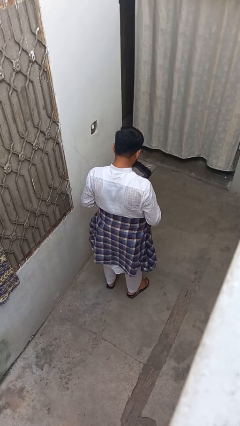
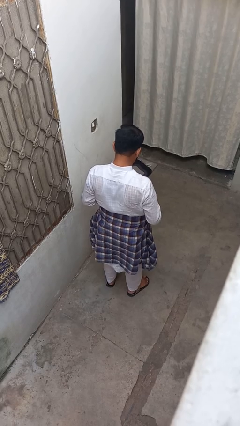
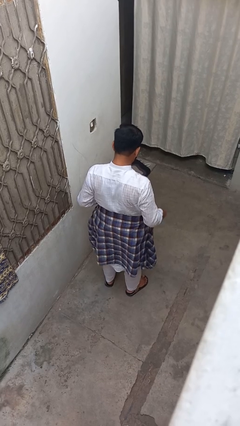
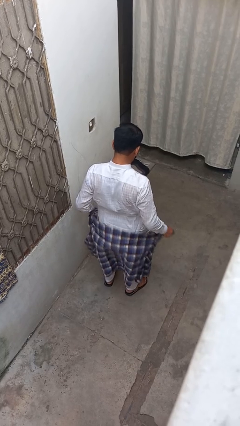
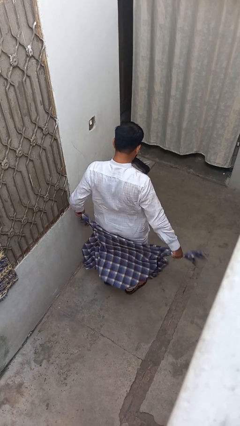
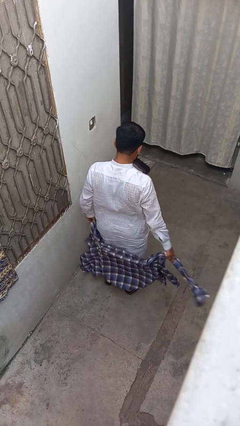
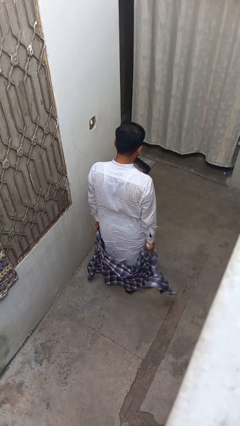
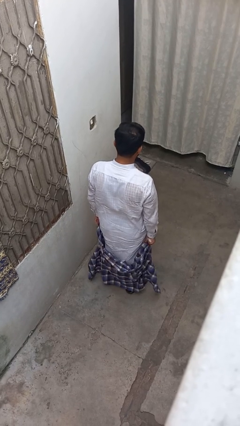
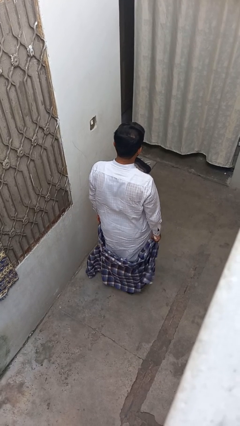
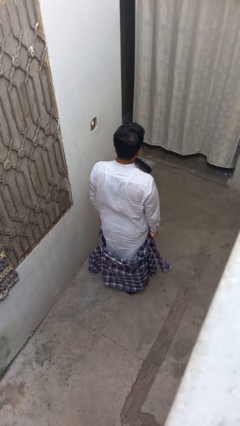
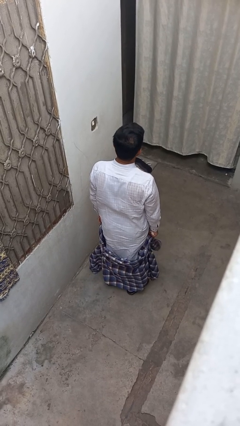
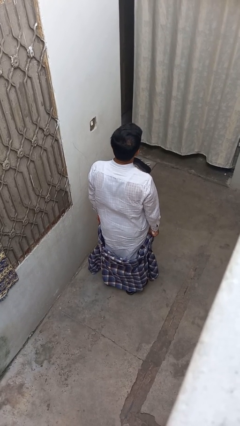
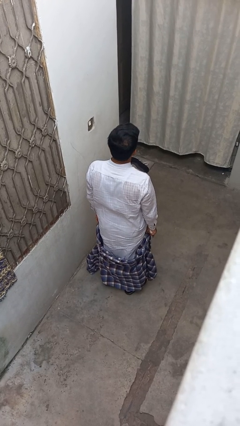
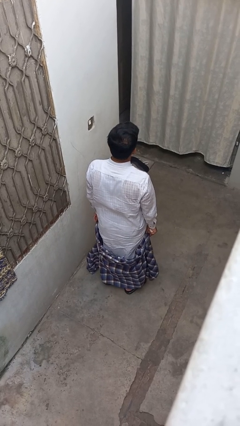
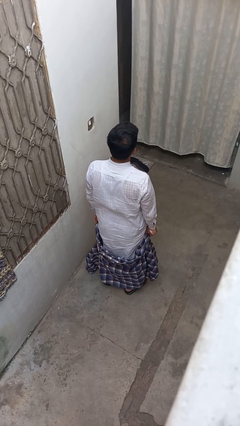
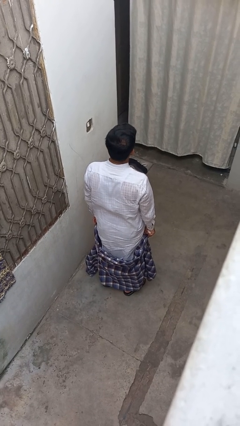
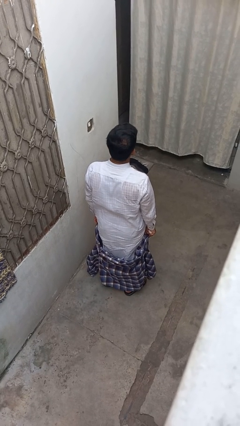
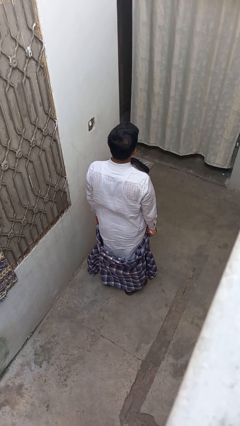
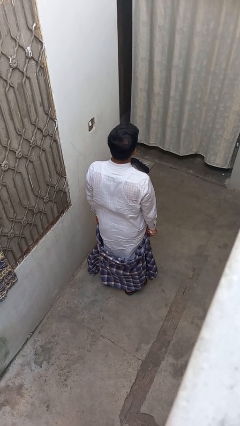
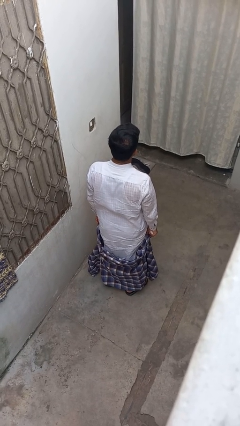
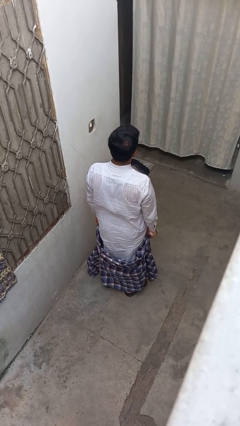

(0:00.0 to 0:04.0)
person unties jacket around waist

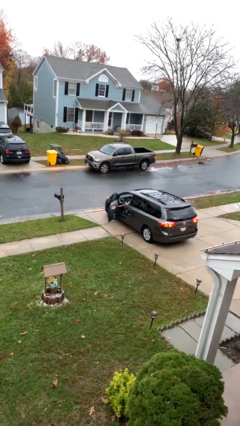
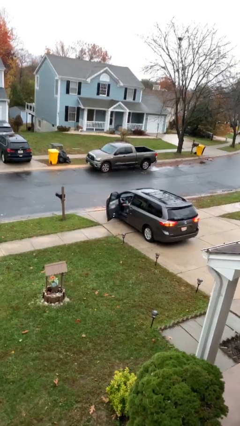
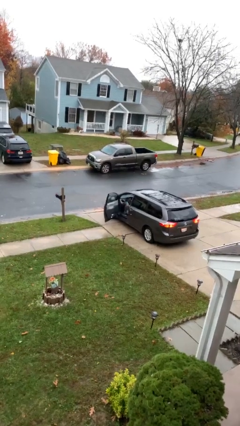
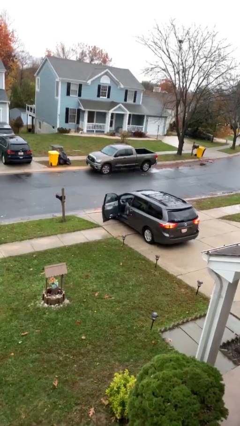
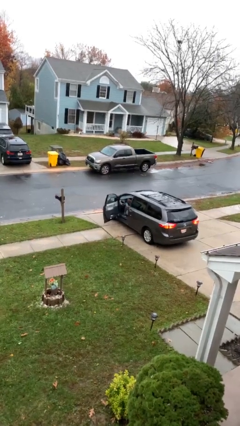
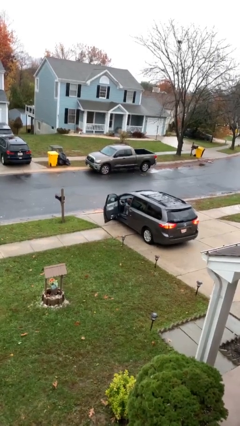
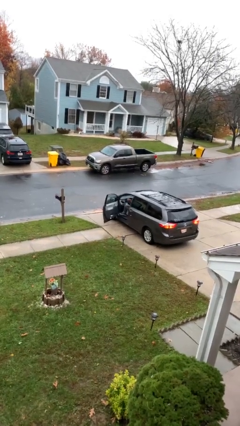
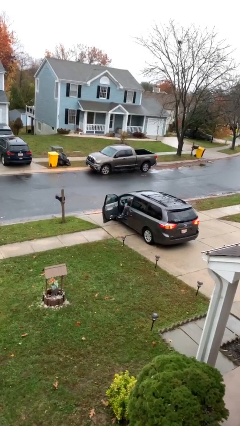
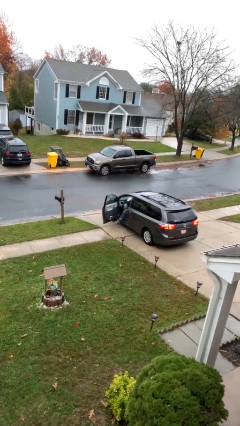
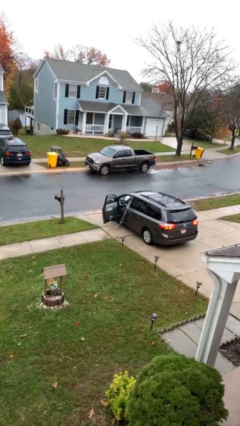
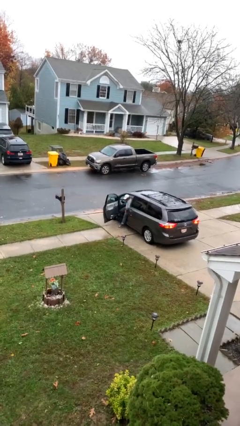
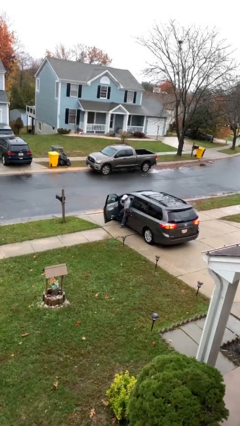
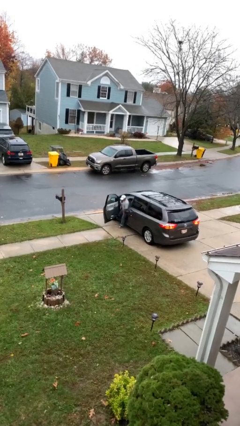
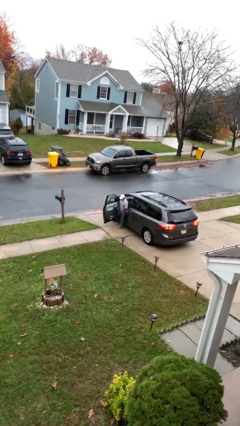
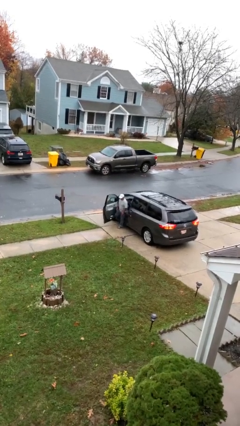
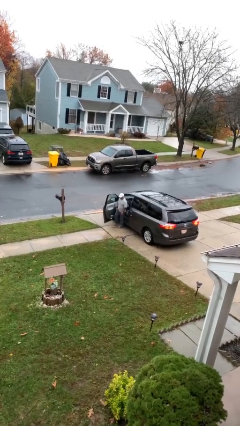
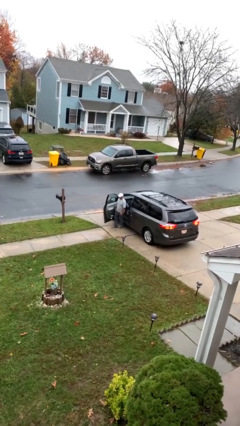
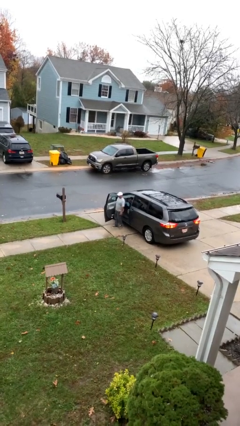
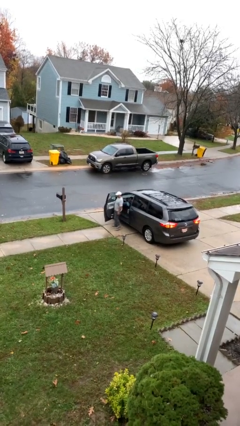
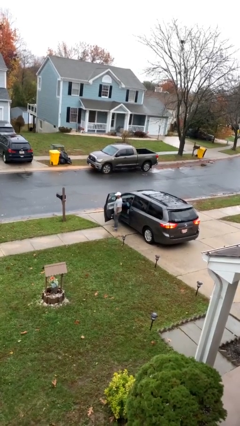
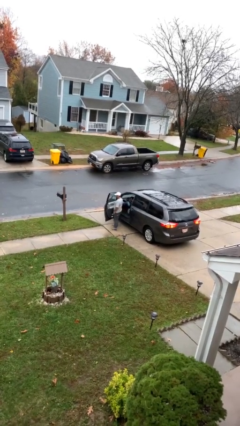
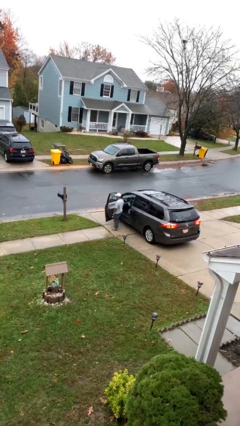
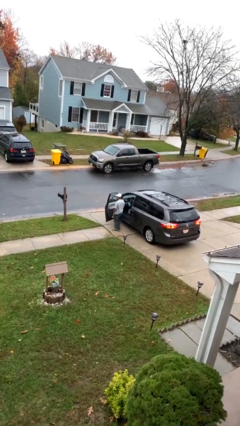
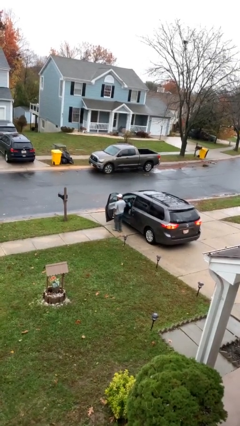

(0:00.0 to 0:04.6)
person exits car

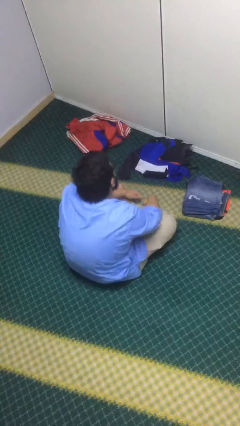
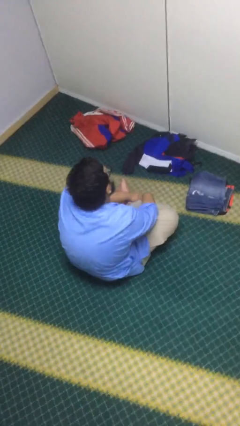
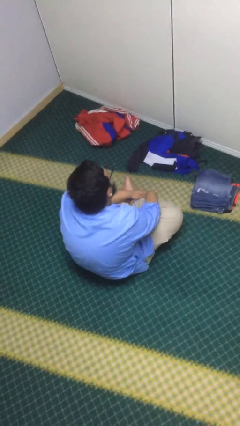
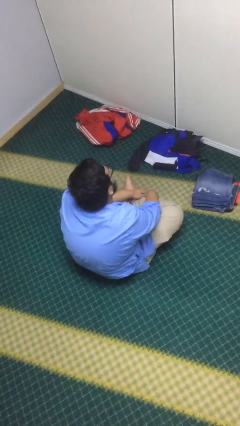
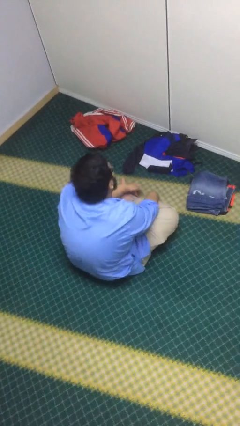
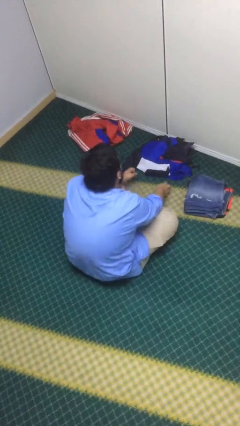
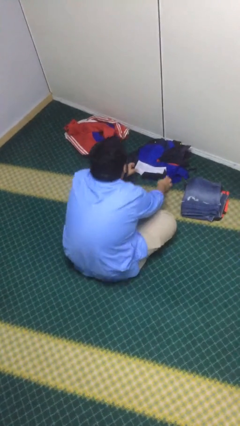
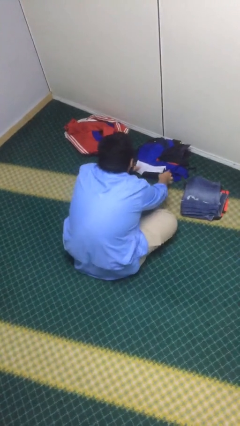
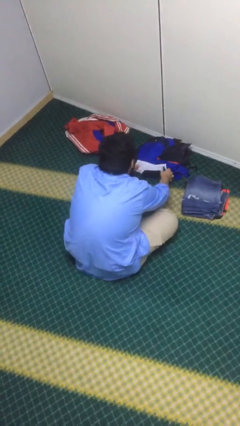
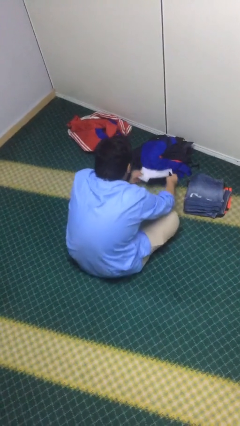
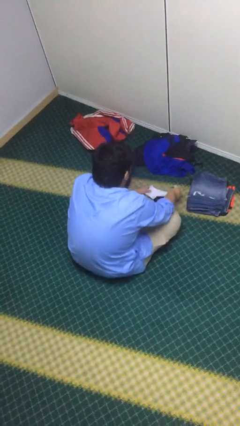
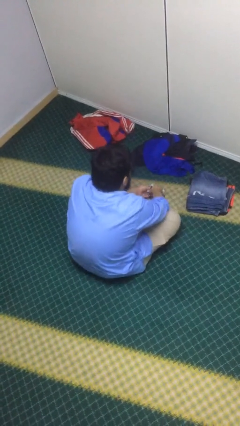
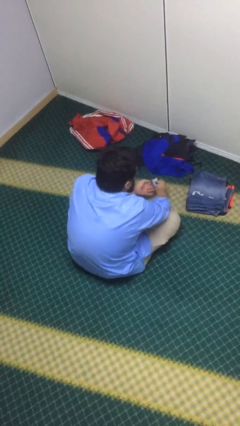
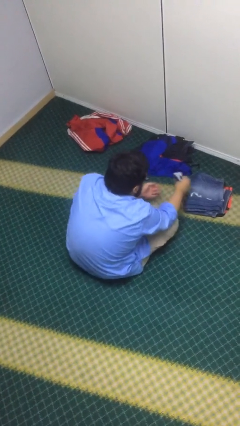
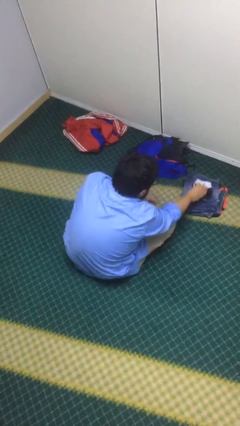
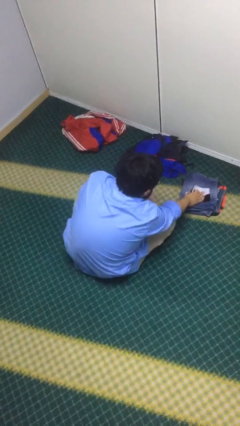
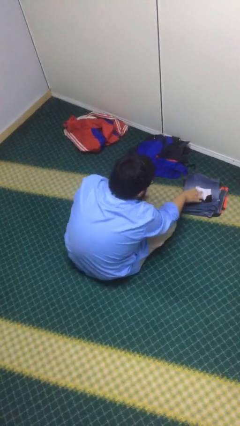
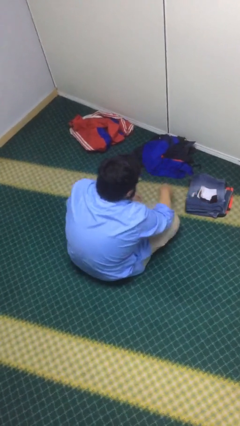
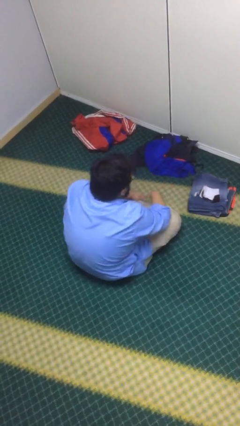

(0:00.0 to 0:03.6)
person folds socks

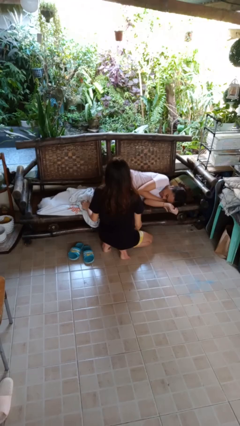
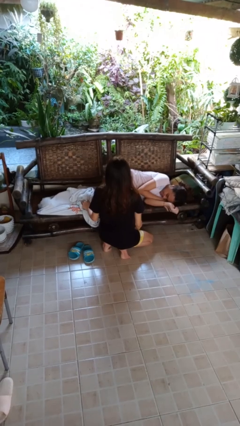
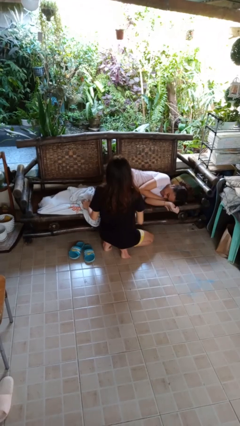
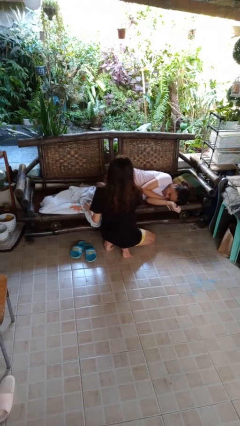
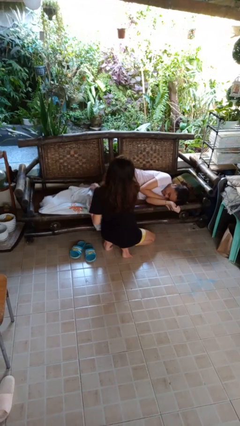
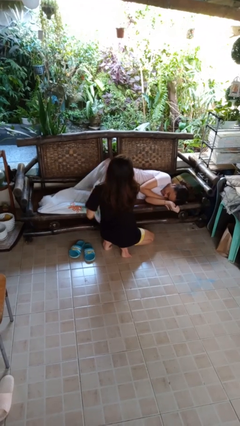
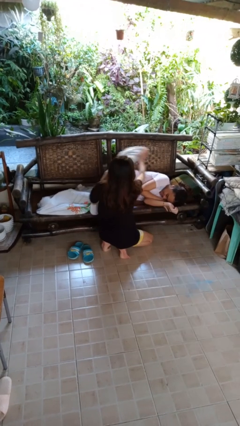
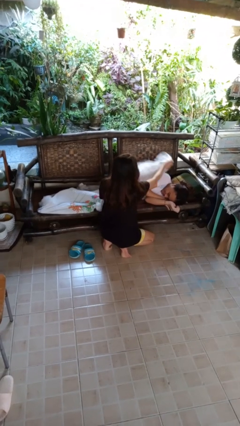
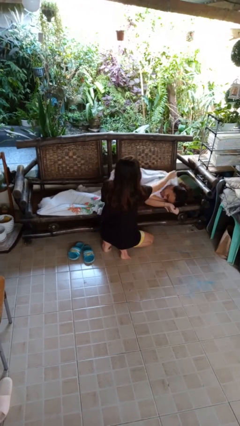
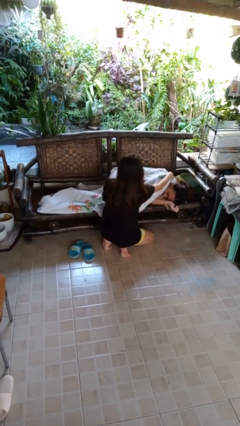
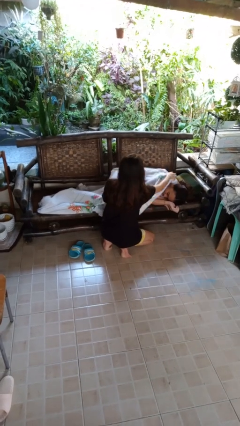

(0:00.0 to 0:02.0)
person covers friend with blanket

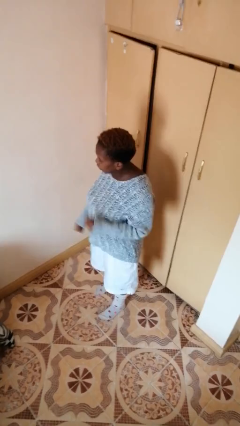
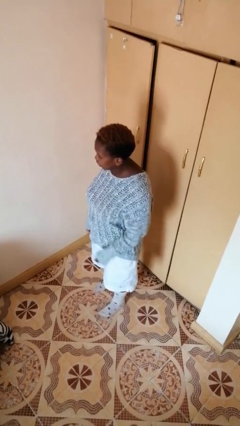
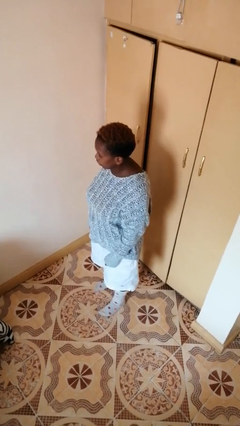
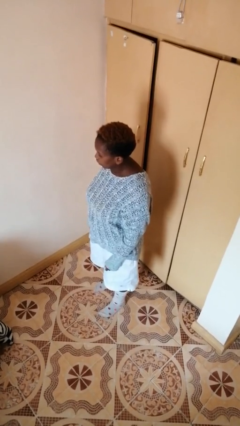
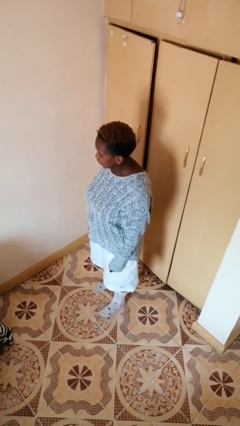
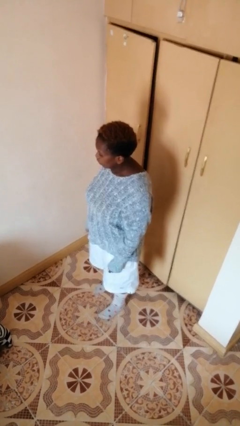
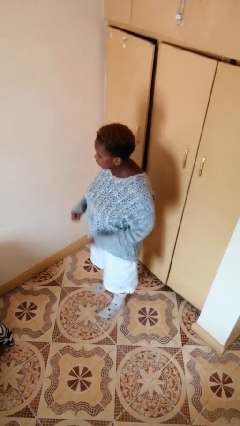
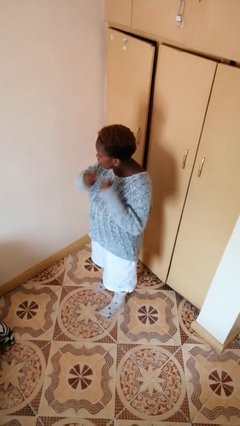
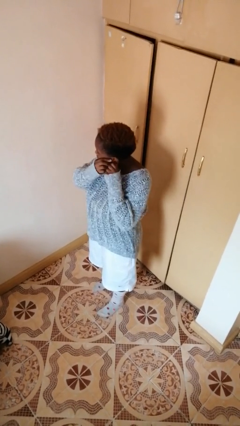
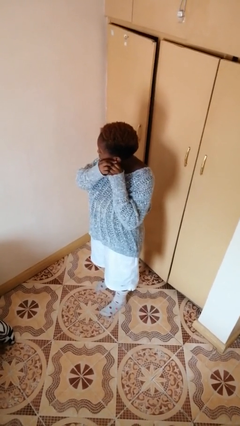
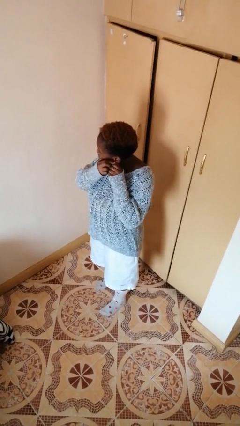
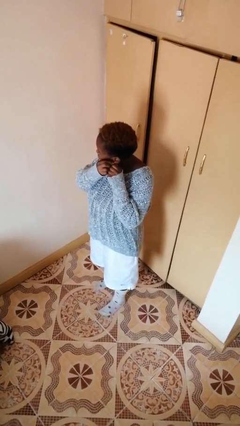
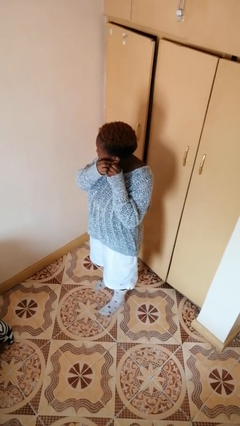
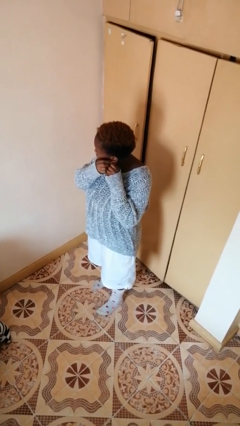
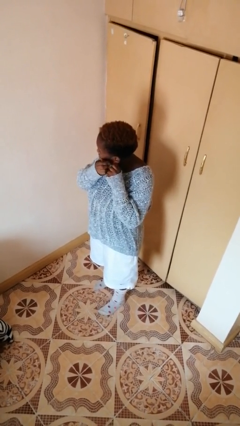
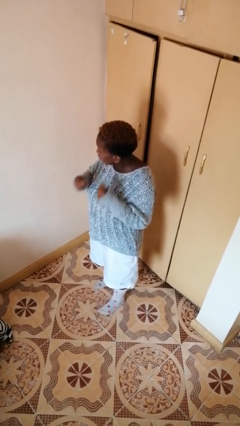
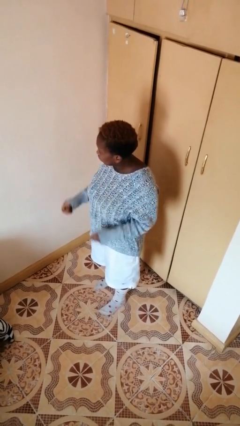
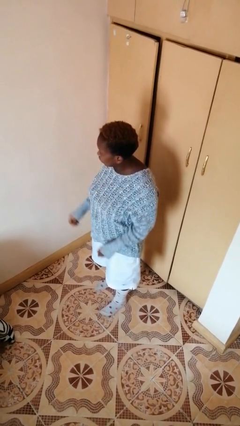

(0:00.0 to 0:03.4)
person takes off earrings
